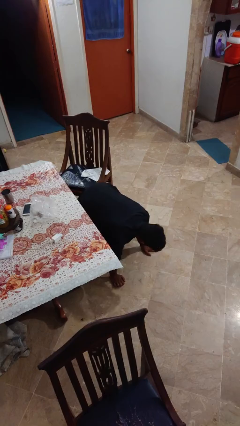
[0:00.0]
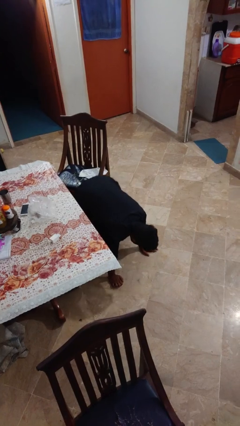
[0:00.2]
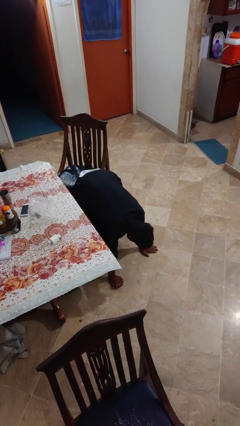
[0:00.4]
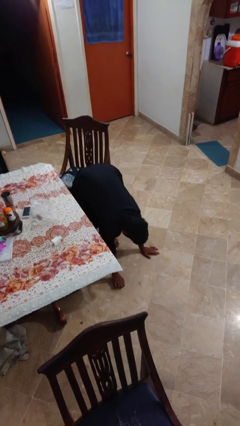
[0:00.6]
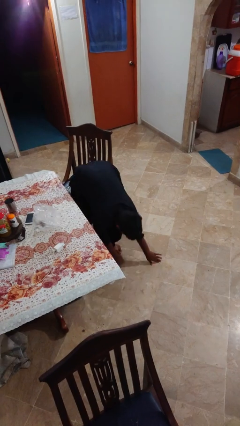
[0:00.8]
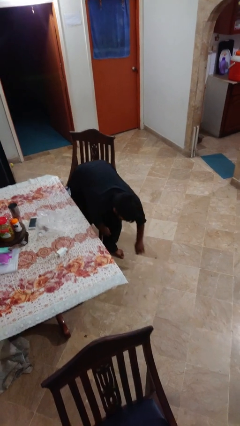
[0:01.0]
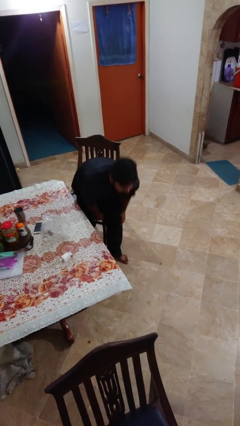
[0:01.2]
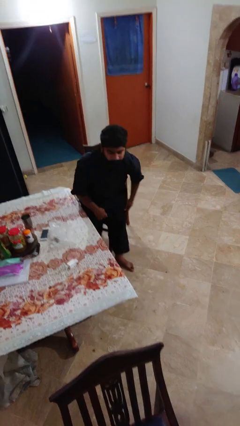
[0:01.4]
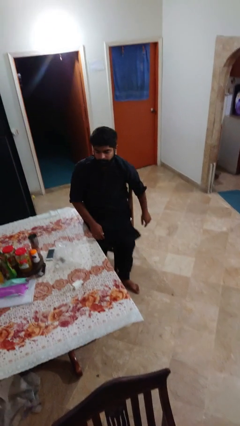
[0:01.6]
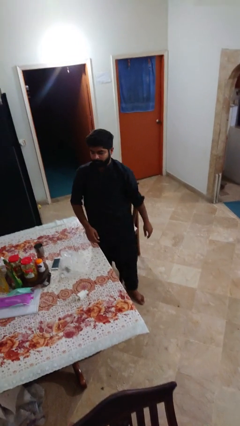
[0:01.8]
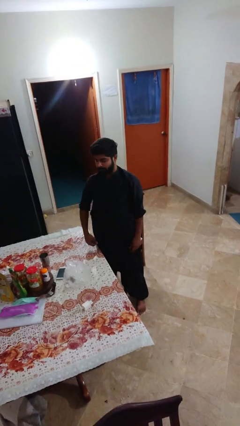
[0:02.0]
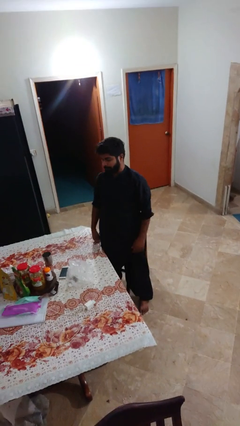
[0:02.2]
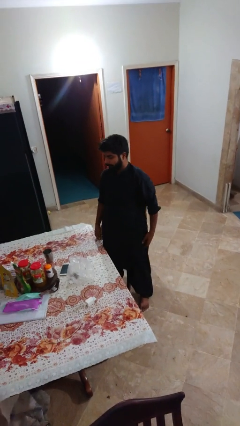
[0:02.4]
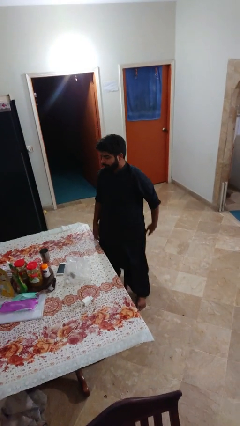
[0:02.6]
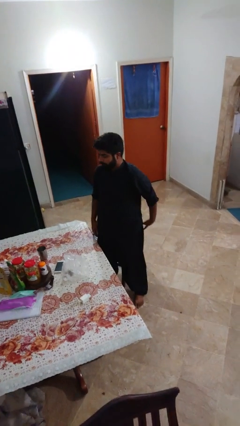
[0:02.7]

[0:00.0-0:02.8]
person stands up from floor

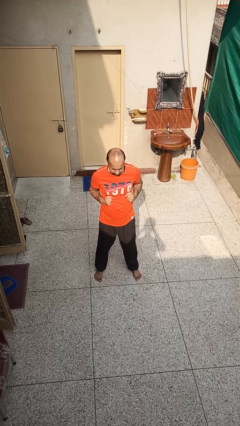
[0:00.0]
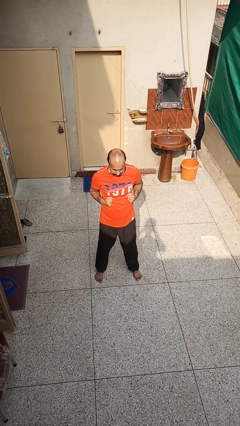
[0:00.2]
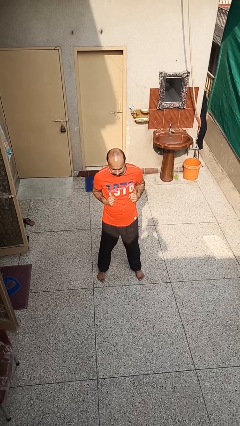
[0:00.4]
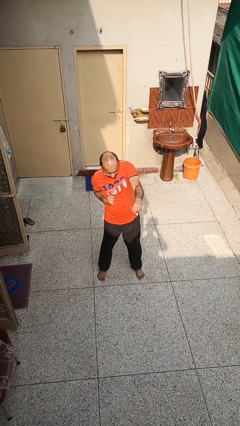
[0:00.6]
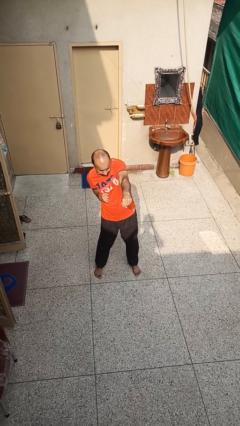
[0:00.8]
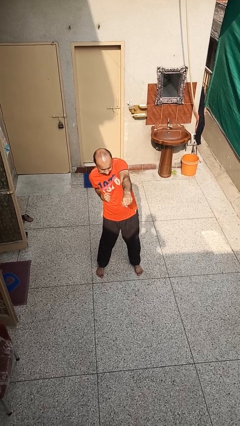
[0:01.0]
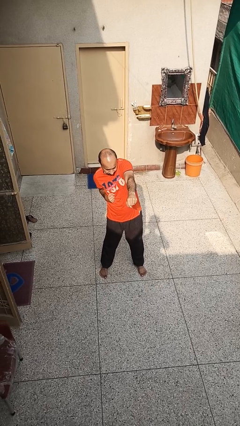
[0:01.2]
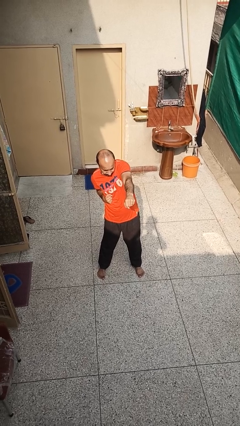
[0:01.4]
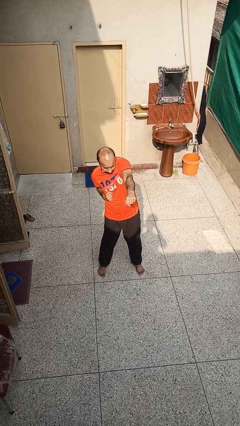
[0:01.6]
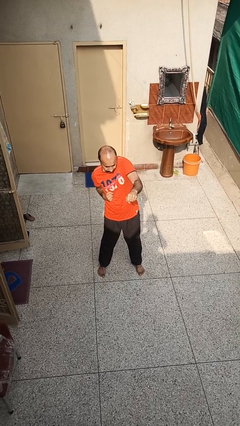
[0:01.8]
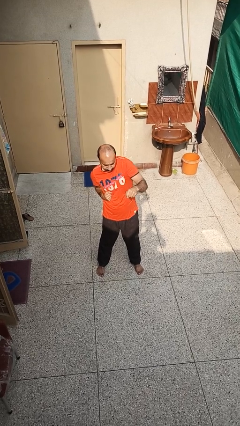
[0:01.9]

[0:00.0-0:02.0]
person punches

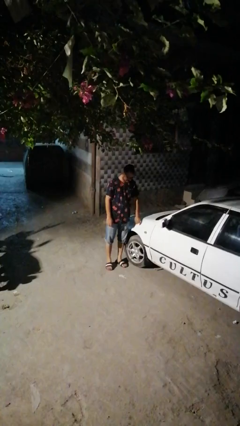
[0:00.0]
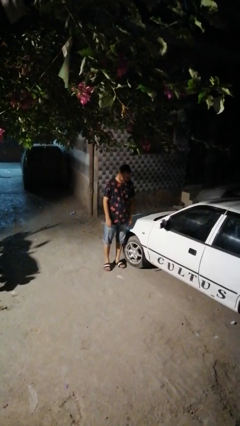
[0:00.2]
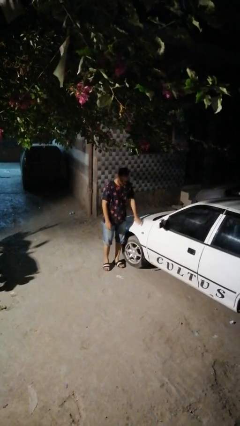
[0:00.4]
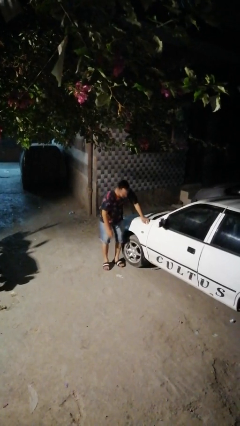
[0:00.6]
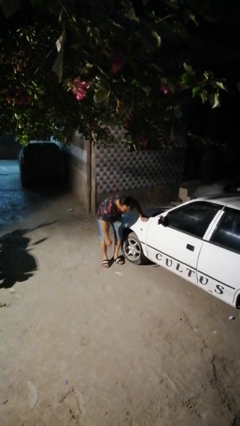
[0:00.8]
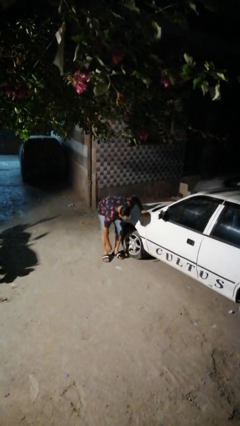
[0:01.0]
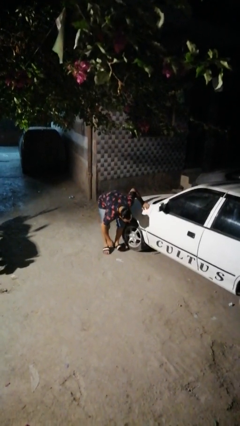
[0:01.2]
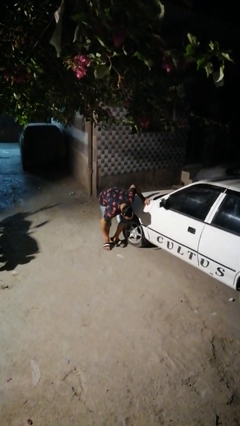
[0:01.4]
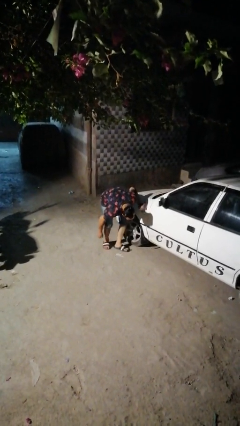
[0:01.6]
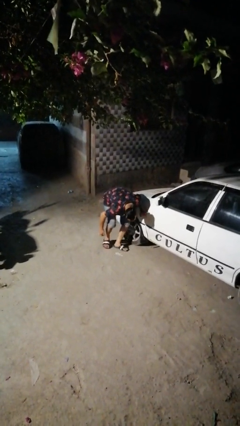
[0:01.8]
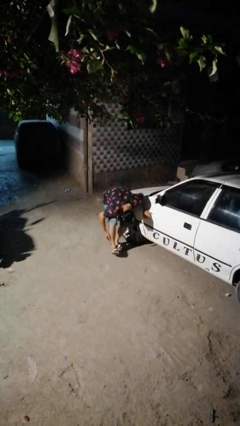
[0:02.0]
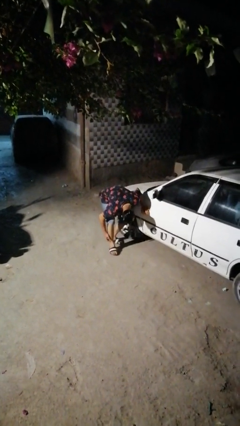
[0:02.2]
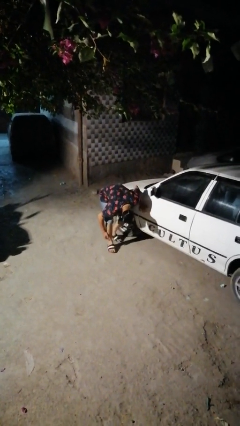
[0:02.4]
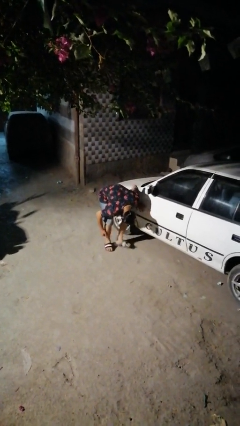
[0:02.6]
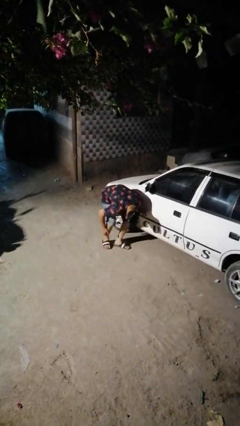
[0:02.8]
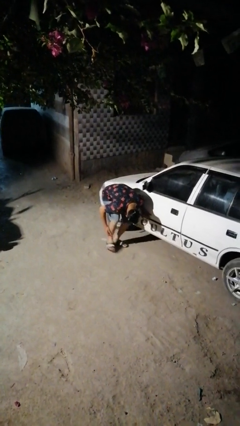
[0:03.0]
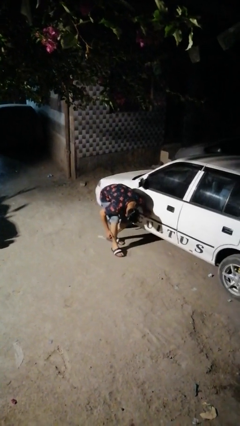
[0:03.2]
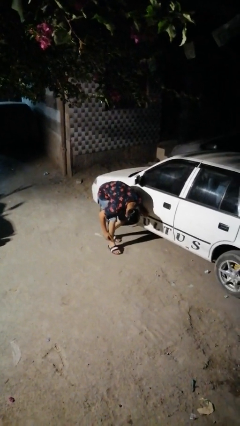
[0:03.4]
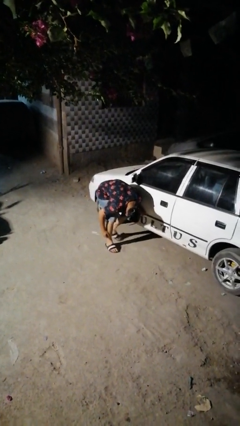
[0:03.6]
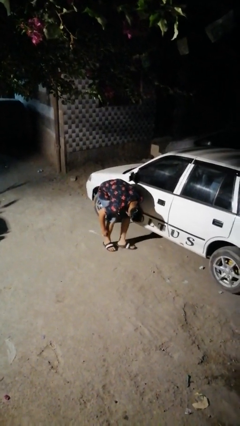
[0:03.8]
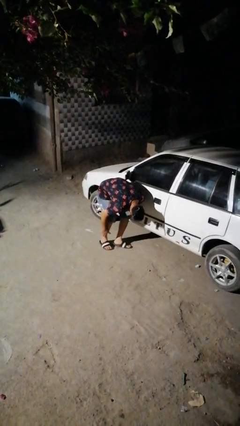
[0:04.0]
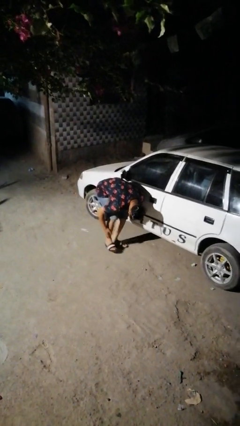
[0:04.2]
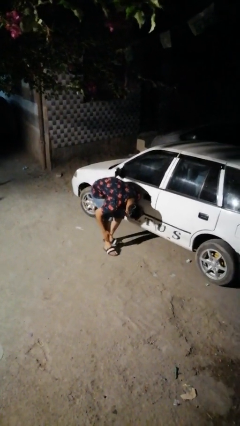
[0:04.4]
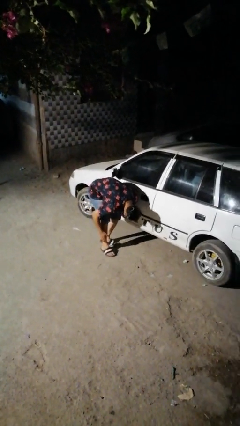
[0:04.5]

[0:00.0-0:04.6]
person crawls out from under vehicle

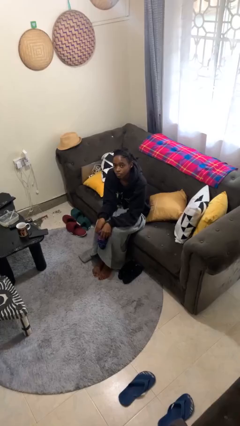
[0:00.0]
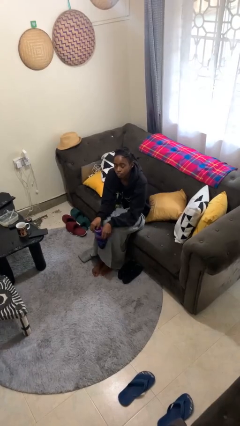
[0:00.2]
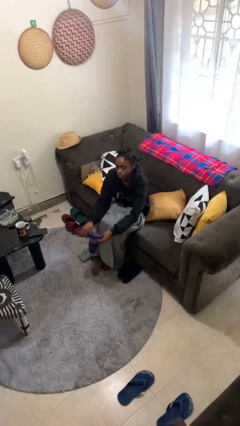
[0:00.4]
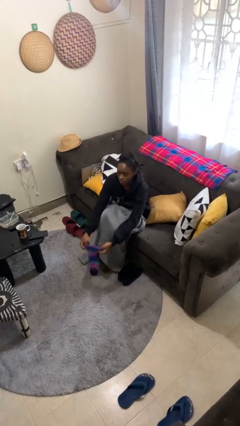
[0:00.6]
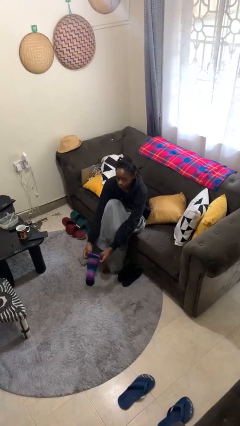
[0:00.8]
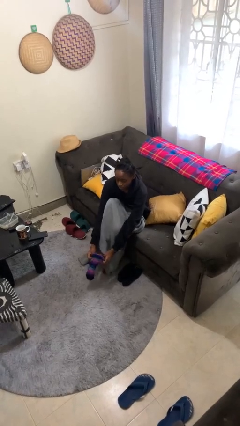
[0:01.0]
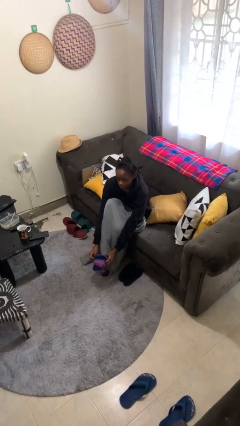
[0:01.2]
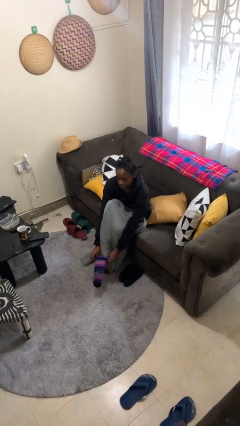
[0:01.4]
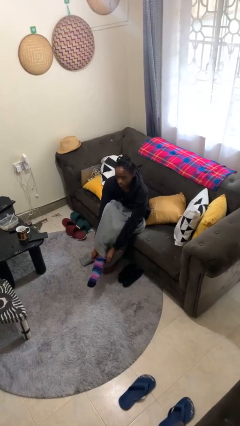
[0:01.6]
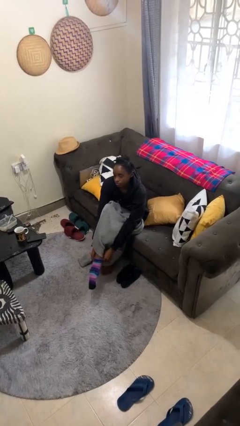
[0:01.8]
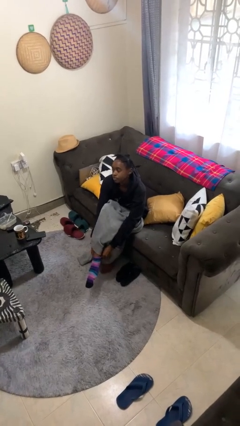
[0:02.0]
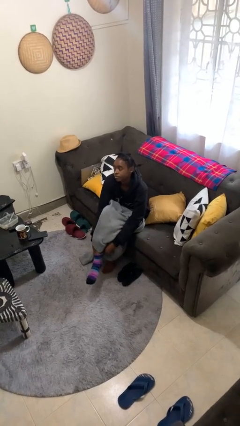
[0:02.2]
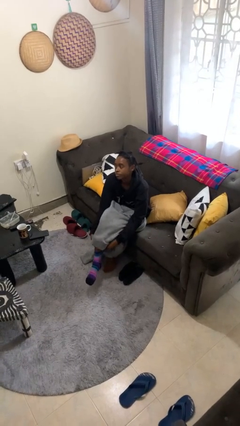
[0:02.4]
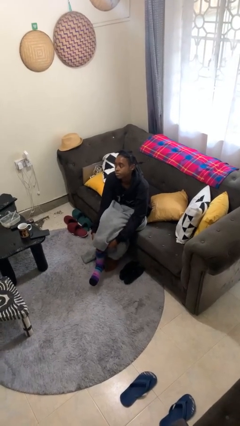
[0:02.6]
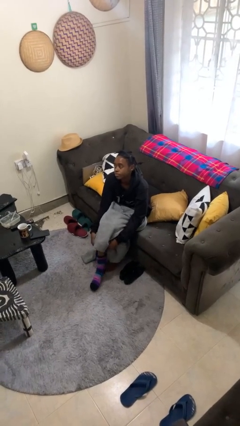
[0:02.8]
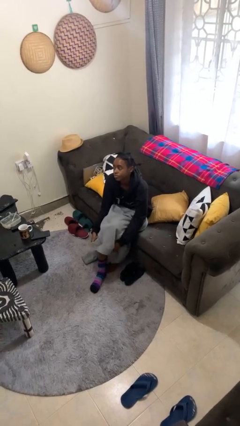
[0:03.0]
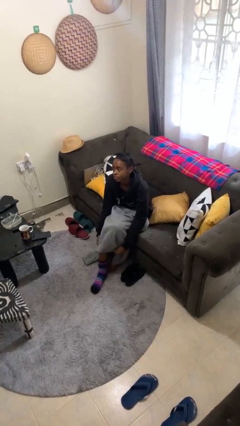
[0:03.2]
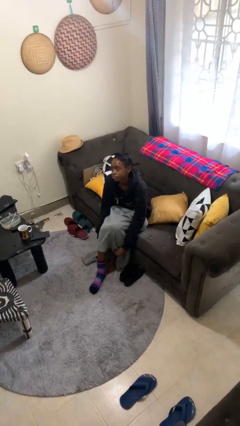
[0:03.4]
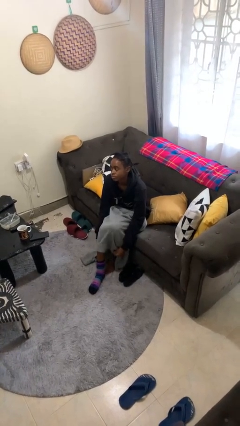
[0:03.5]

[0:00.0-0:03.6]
person puts on socks

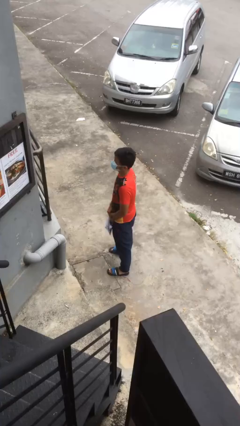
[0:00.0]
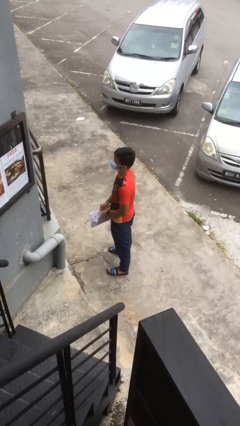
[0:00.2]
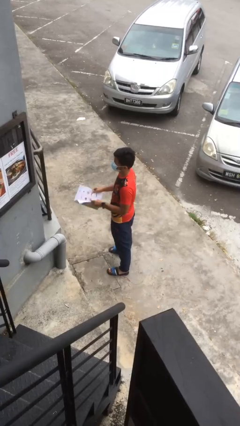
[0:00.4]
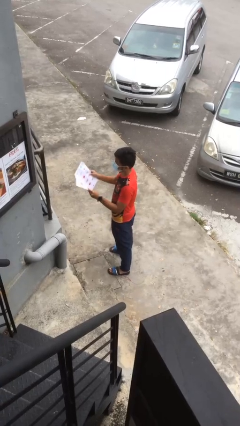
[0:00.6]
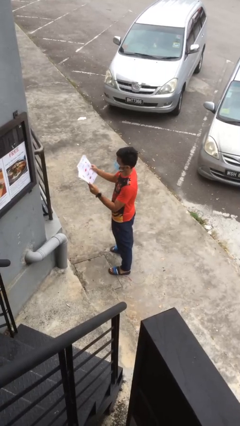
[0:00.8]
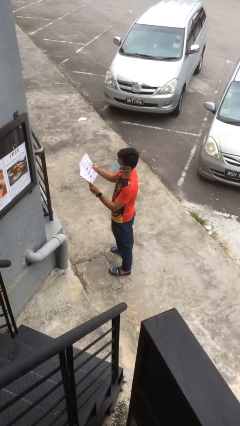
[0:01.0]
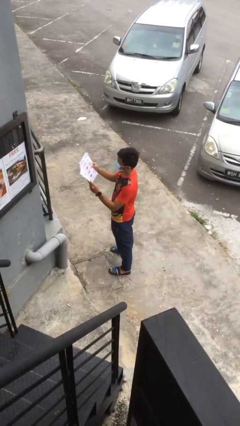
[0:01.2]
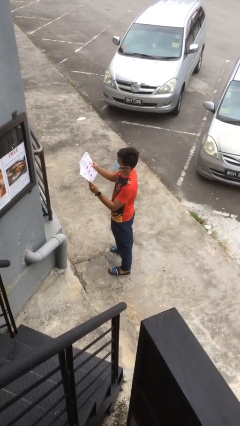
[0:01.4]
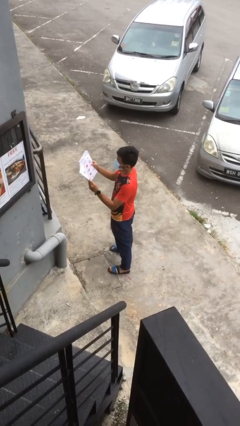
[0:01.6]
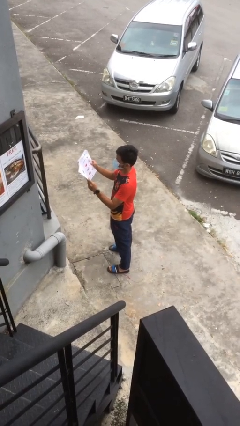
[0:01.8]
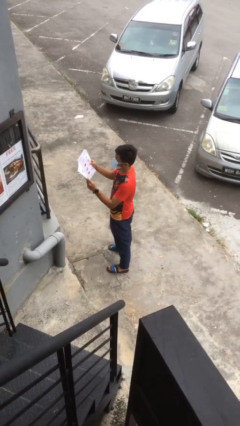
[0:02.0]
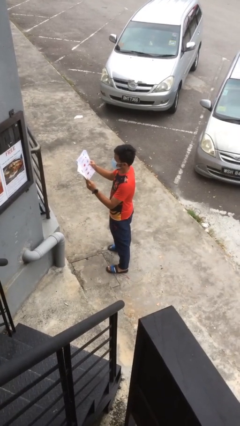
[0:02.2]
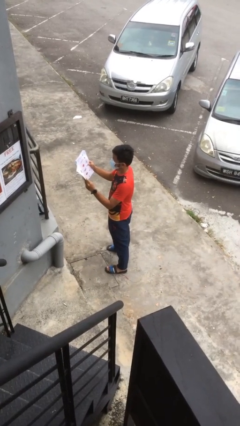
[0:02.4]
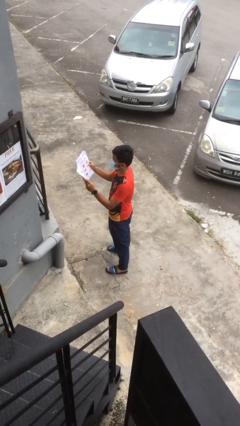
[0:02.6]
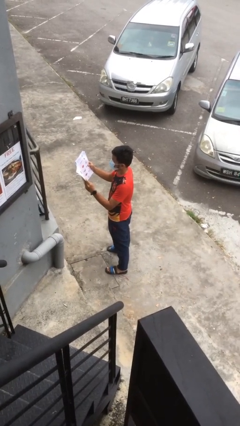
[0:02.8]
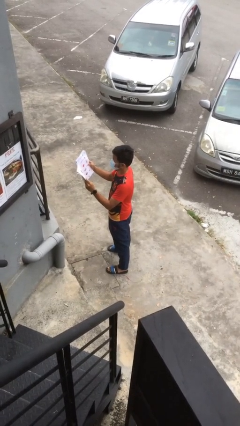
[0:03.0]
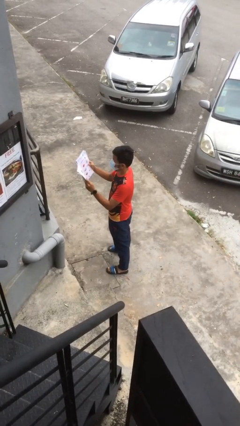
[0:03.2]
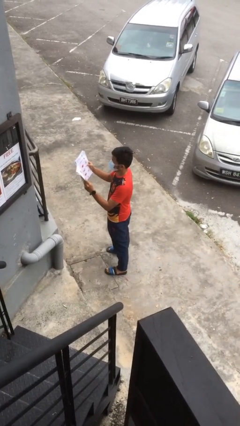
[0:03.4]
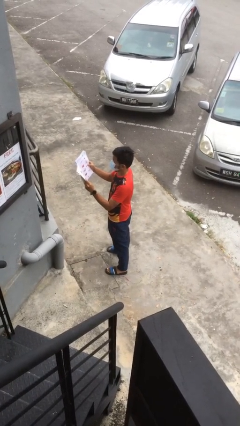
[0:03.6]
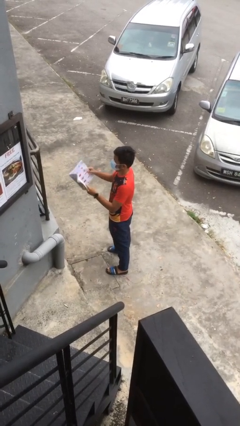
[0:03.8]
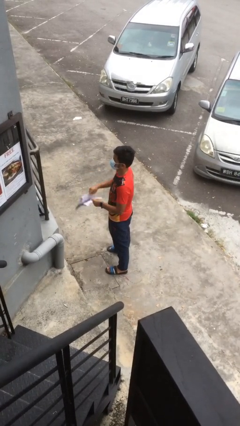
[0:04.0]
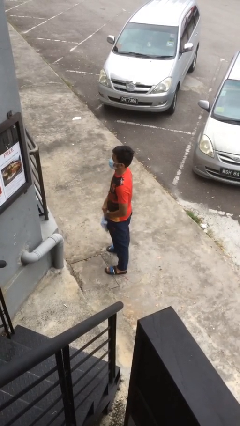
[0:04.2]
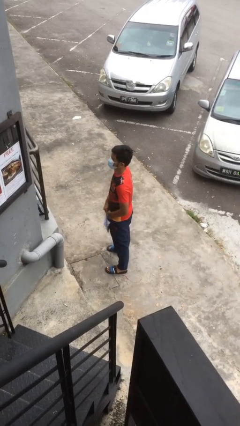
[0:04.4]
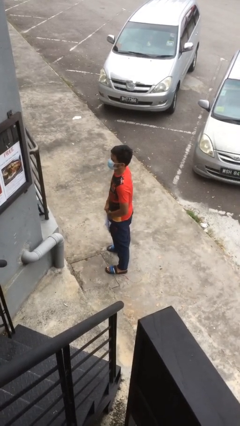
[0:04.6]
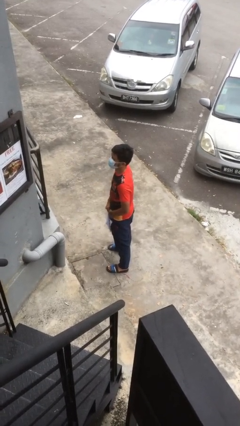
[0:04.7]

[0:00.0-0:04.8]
person reads document

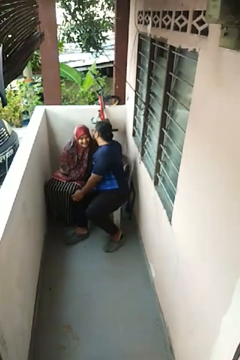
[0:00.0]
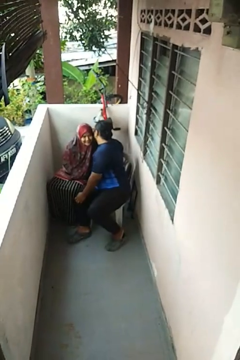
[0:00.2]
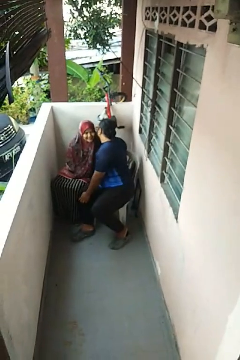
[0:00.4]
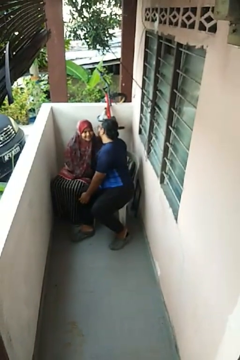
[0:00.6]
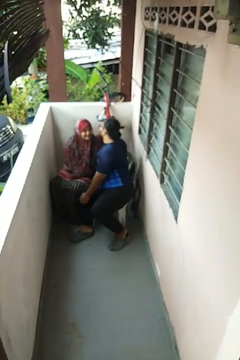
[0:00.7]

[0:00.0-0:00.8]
person kisses cheek of person
